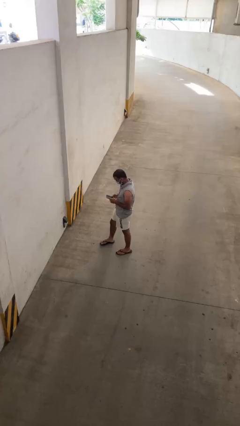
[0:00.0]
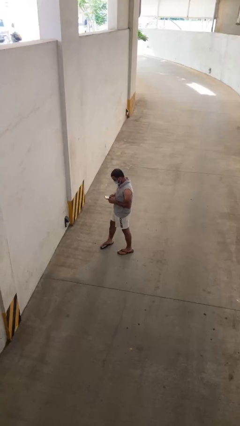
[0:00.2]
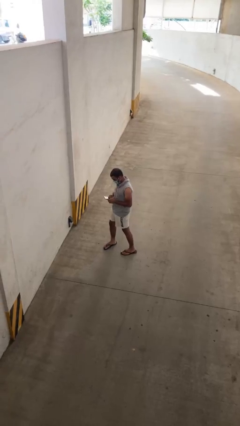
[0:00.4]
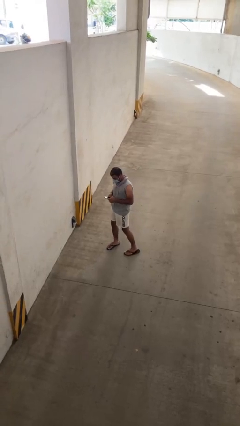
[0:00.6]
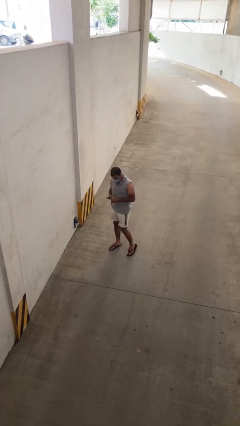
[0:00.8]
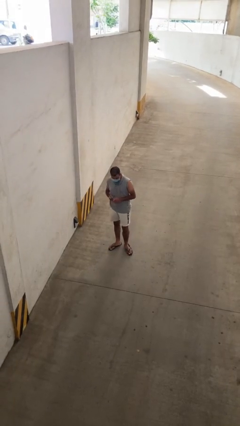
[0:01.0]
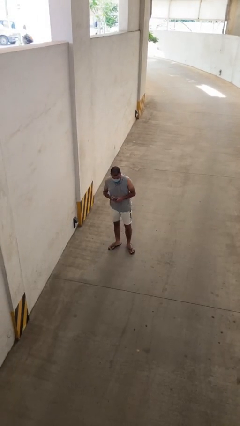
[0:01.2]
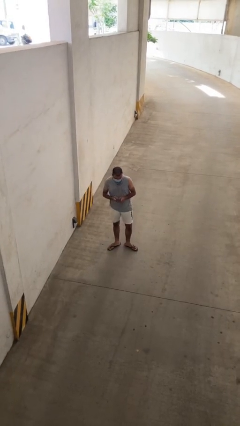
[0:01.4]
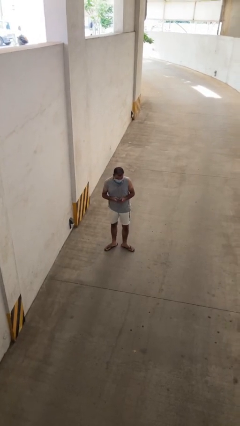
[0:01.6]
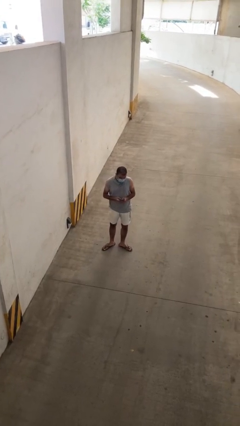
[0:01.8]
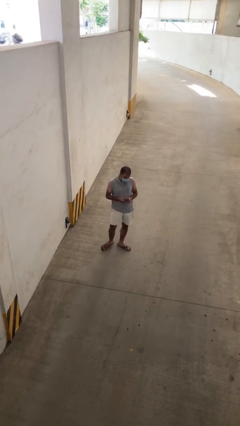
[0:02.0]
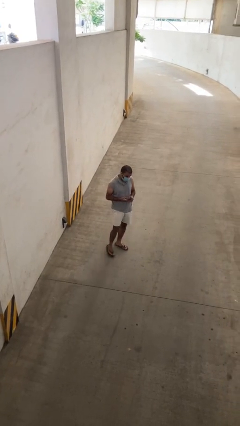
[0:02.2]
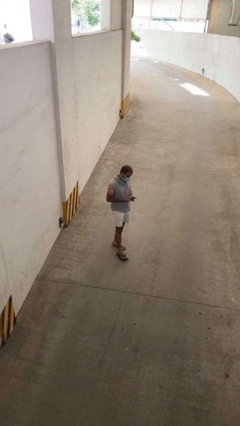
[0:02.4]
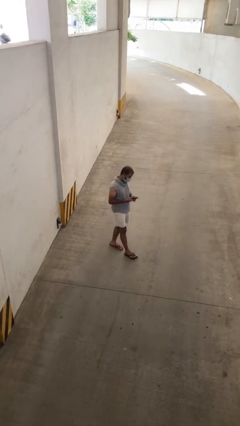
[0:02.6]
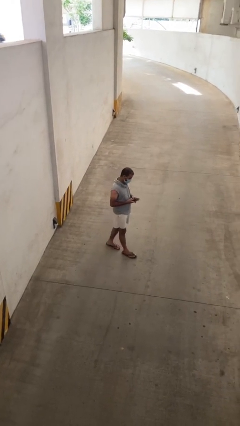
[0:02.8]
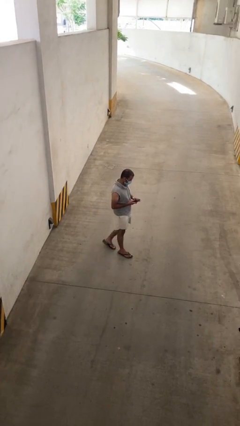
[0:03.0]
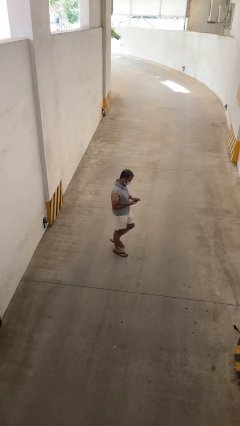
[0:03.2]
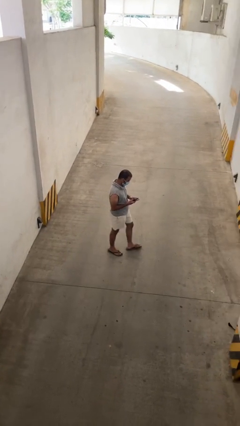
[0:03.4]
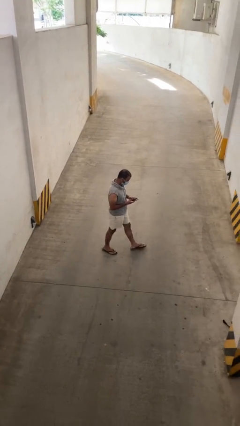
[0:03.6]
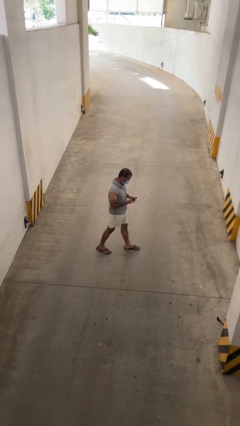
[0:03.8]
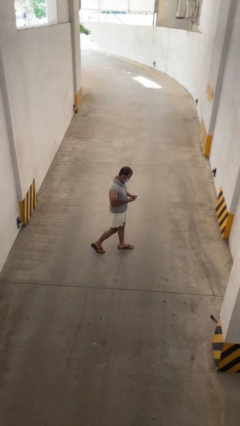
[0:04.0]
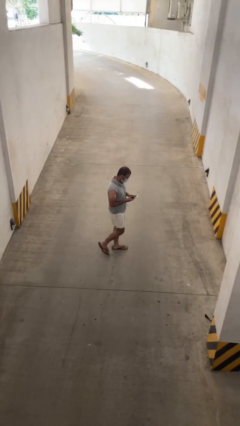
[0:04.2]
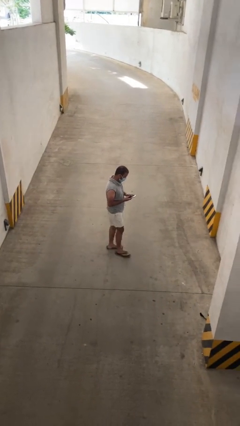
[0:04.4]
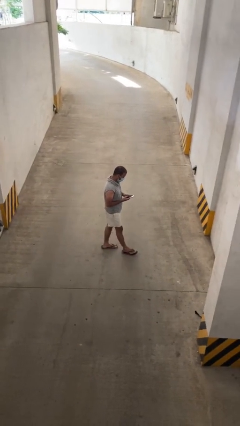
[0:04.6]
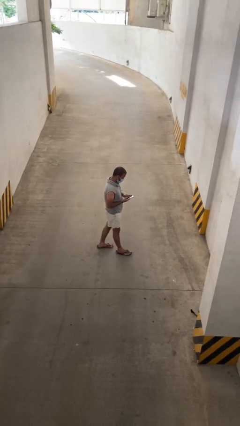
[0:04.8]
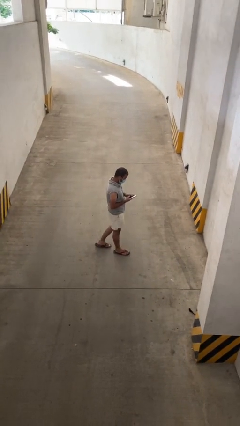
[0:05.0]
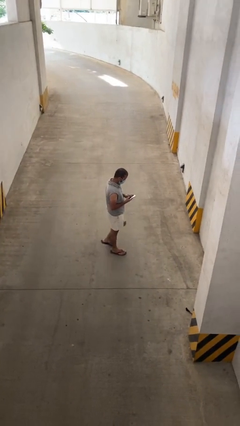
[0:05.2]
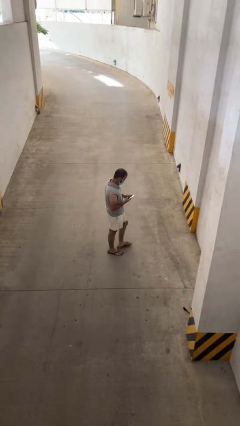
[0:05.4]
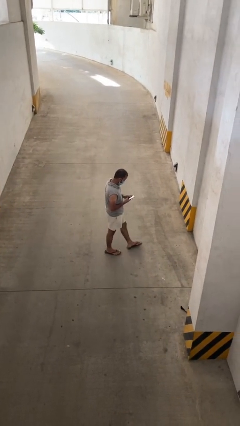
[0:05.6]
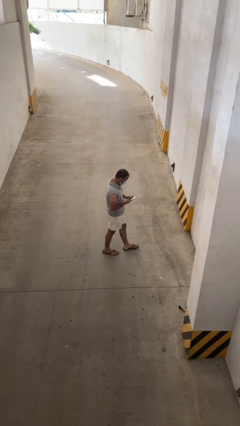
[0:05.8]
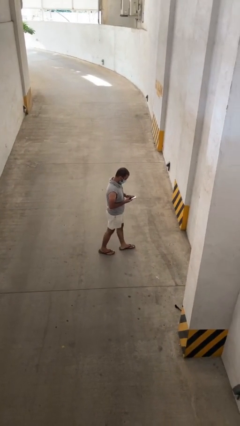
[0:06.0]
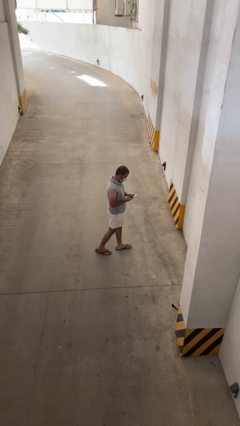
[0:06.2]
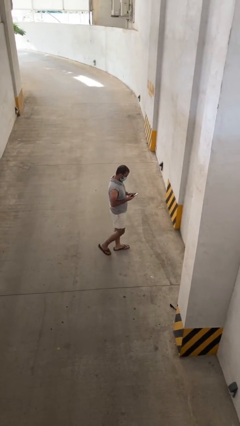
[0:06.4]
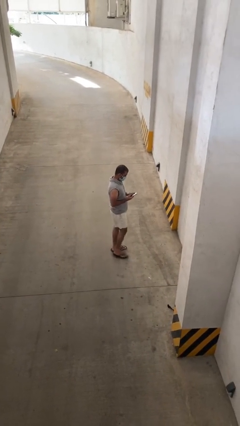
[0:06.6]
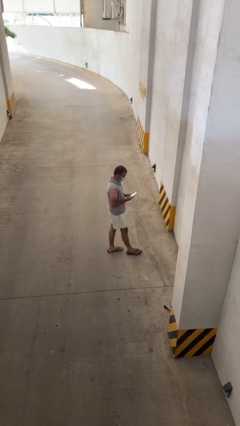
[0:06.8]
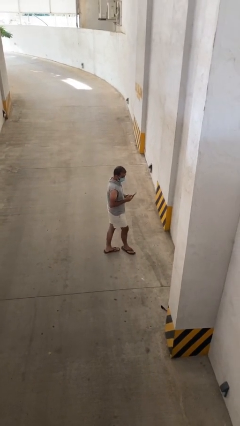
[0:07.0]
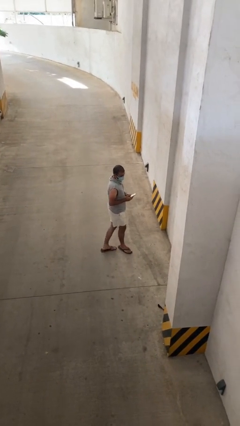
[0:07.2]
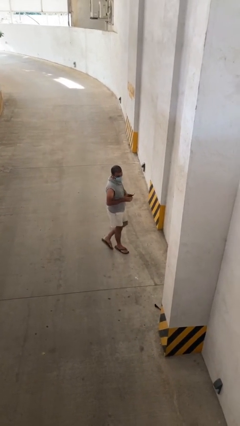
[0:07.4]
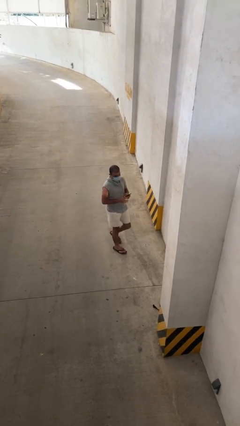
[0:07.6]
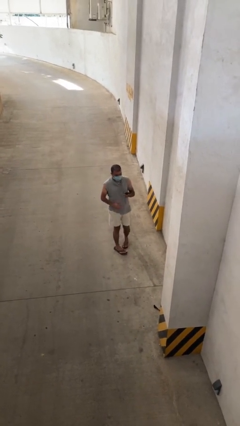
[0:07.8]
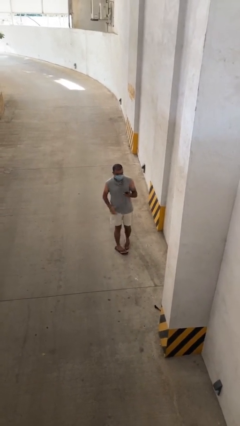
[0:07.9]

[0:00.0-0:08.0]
person texts on phone

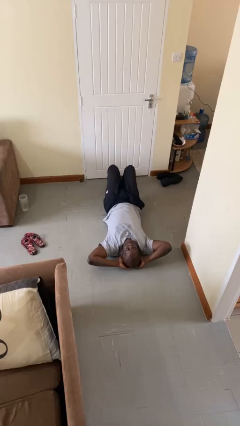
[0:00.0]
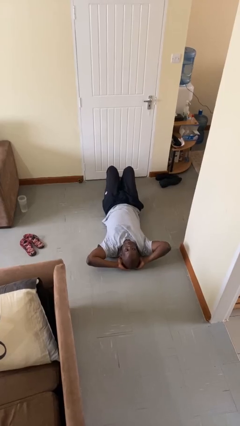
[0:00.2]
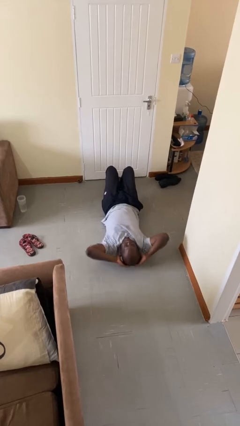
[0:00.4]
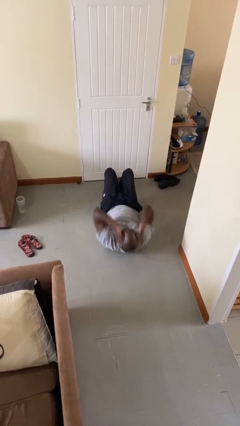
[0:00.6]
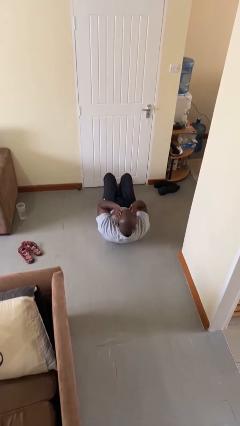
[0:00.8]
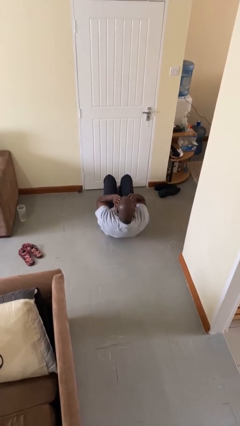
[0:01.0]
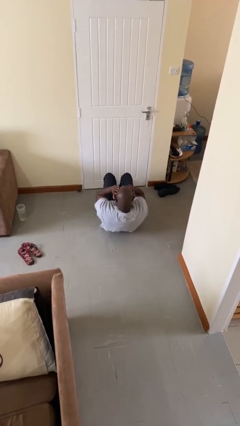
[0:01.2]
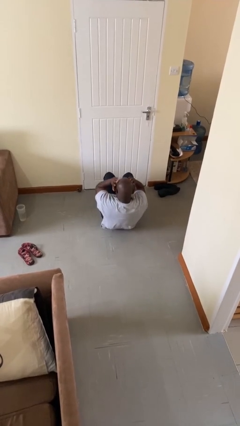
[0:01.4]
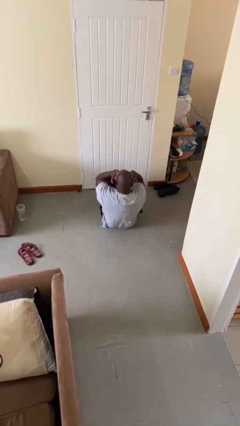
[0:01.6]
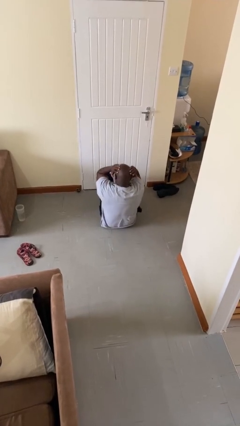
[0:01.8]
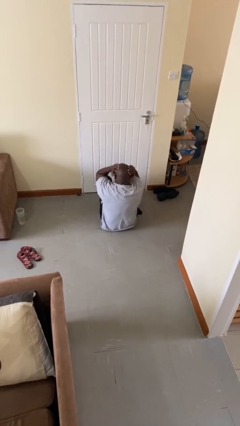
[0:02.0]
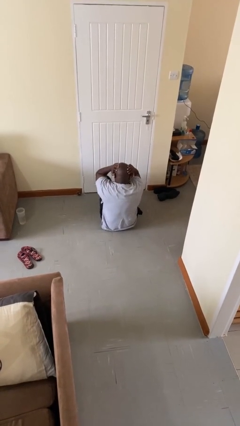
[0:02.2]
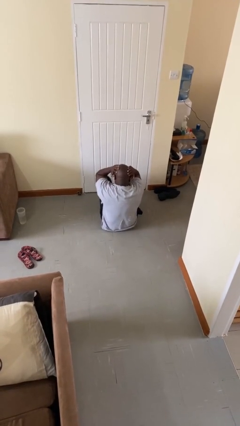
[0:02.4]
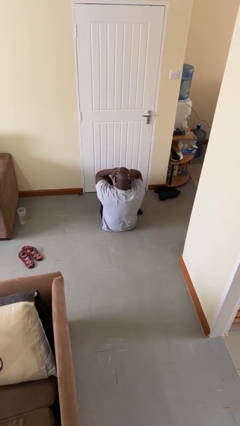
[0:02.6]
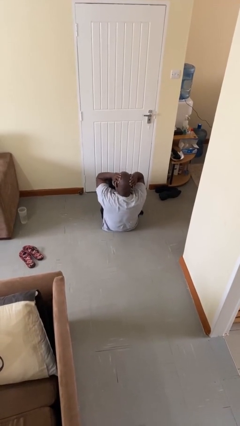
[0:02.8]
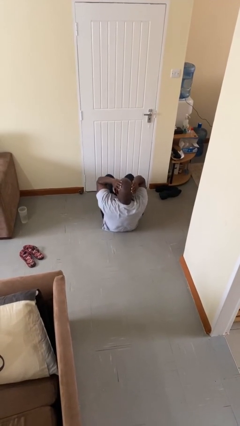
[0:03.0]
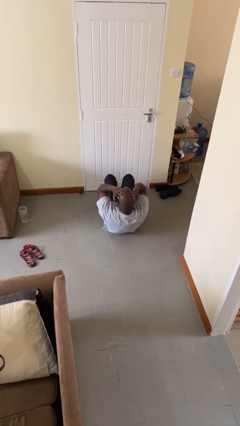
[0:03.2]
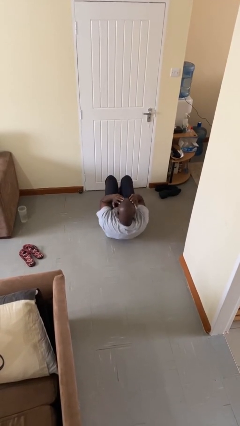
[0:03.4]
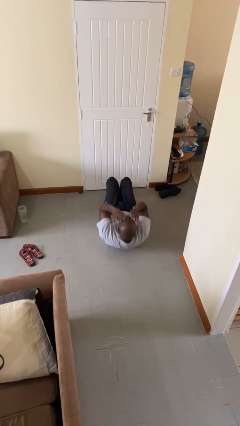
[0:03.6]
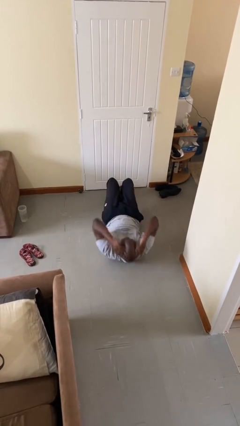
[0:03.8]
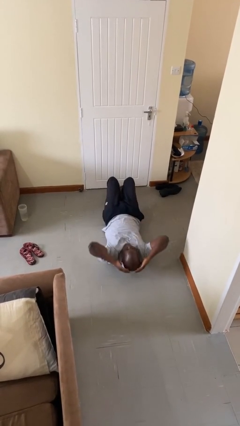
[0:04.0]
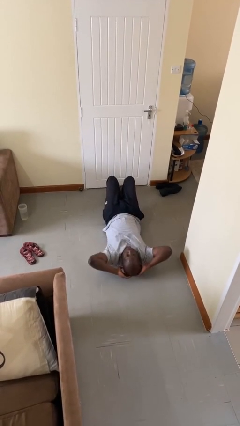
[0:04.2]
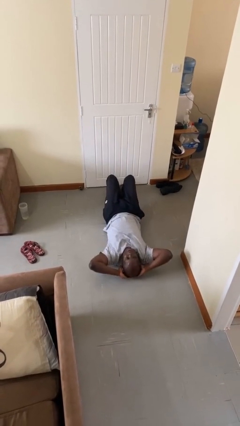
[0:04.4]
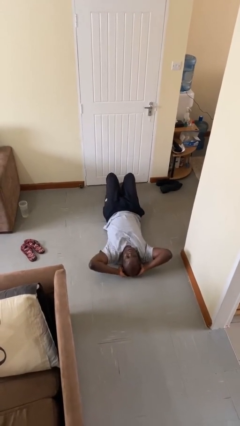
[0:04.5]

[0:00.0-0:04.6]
person exercises with situp

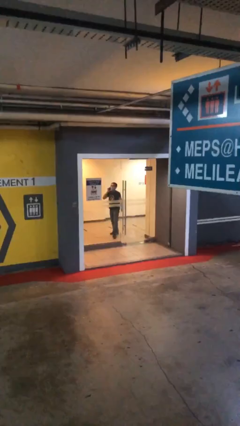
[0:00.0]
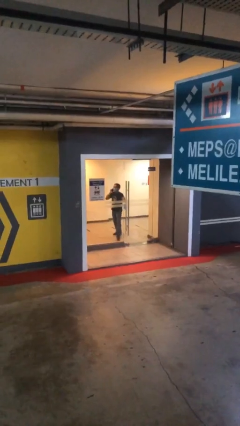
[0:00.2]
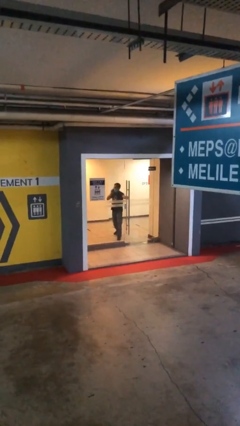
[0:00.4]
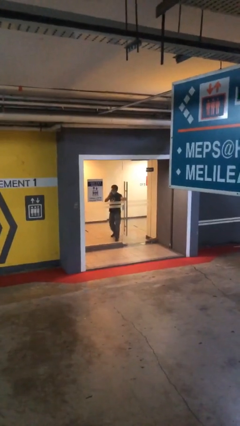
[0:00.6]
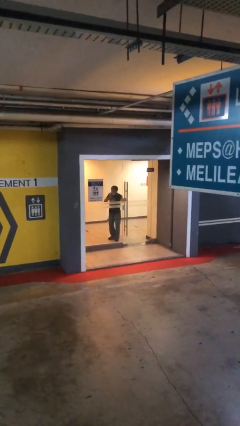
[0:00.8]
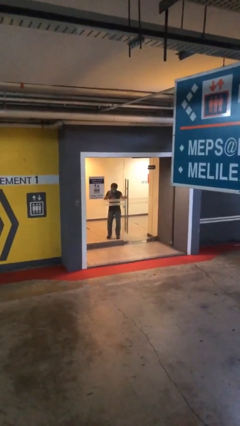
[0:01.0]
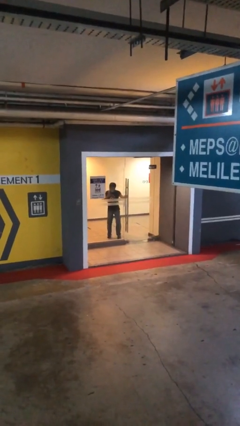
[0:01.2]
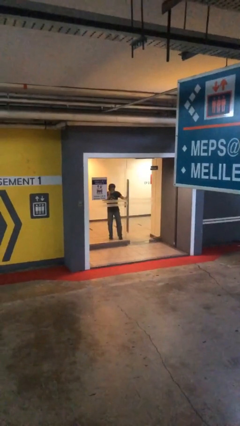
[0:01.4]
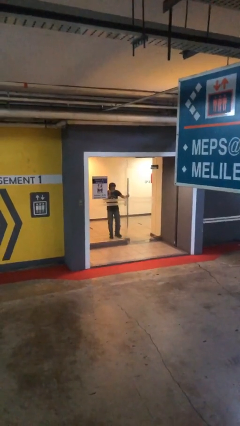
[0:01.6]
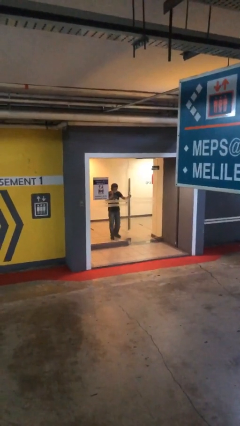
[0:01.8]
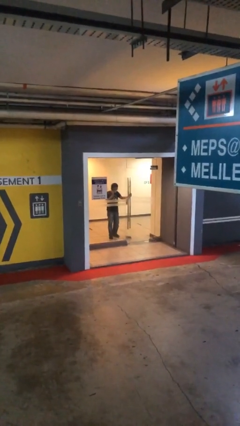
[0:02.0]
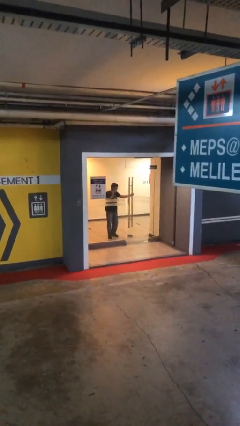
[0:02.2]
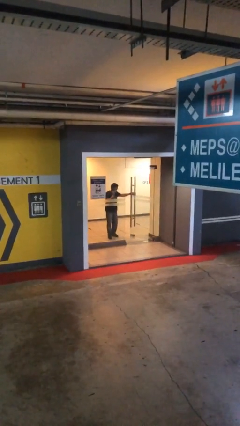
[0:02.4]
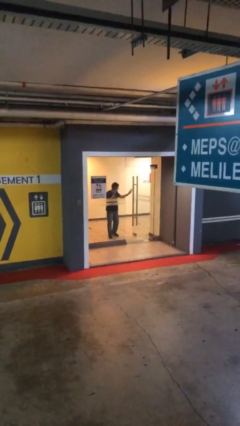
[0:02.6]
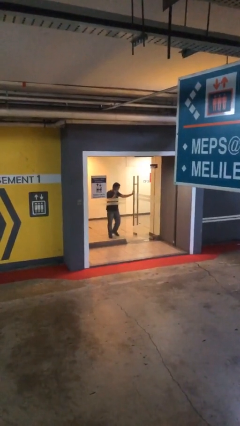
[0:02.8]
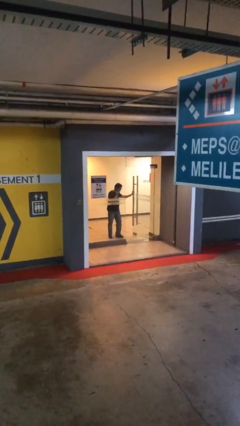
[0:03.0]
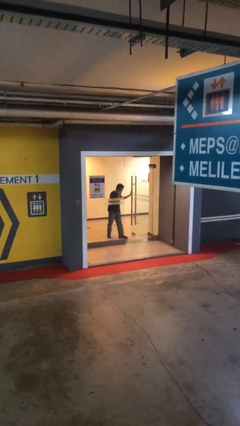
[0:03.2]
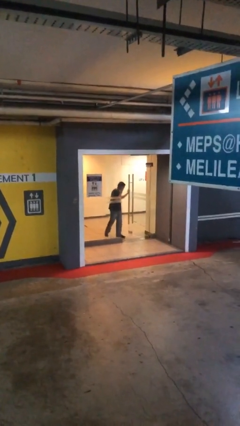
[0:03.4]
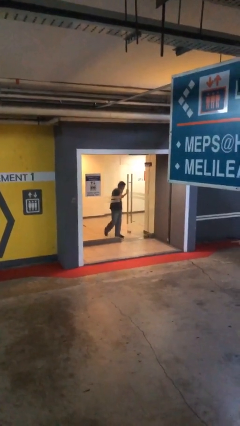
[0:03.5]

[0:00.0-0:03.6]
person opens facility door

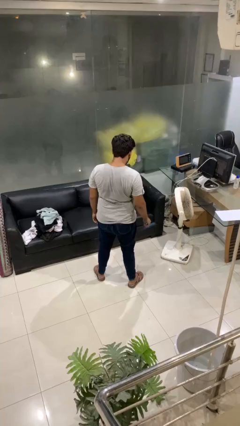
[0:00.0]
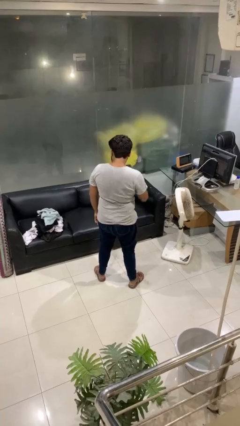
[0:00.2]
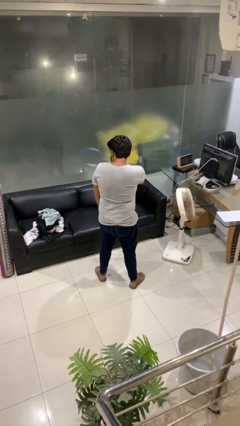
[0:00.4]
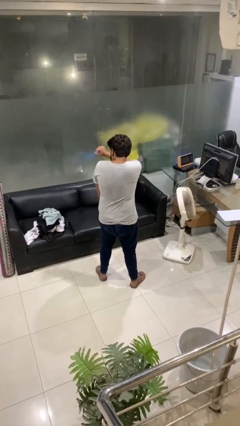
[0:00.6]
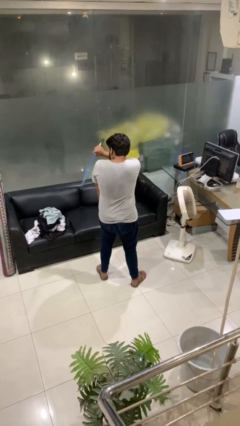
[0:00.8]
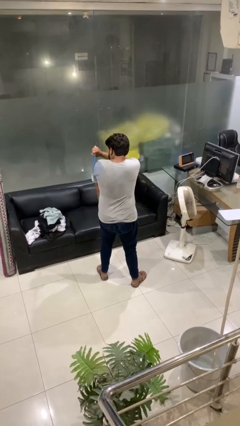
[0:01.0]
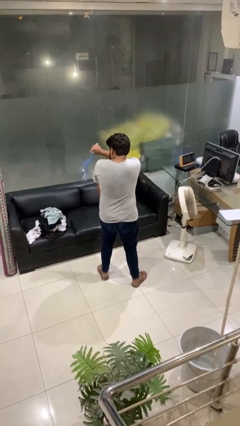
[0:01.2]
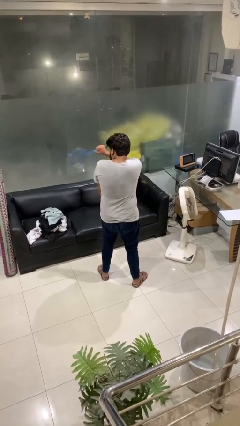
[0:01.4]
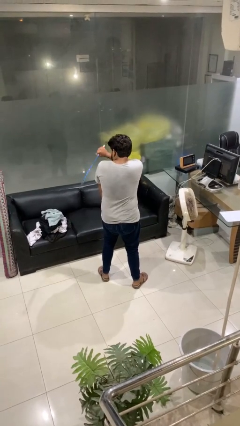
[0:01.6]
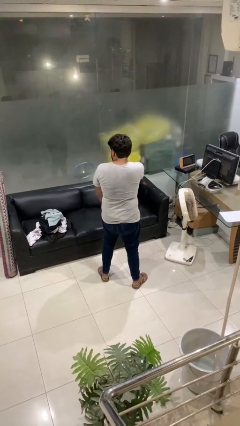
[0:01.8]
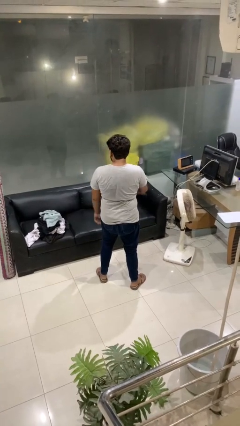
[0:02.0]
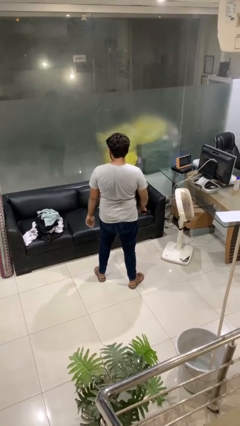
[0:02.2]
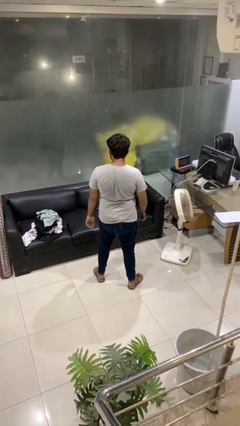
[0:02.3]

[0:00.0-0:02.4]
person swats bug
